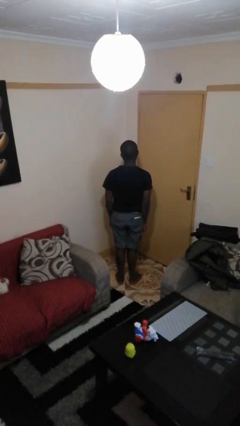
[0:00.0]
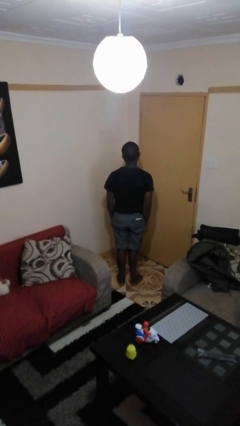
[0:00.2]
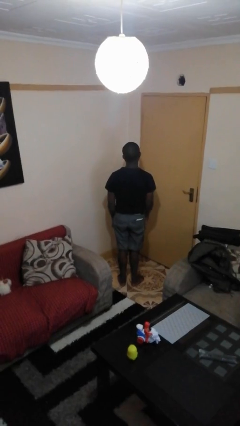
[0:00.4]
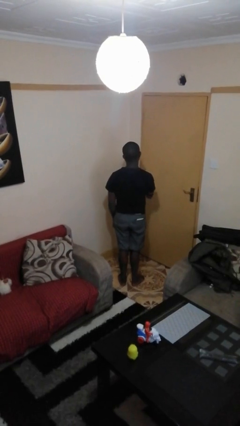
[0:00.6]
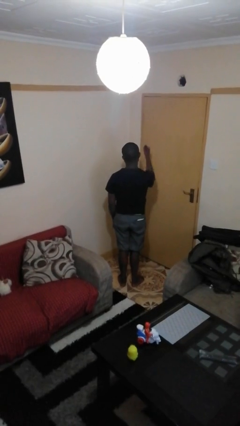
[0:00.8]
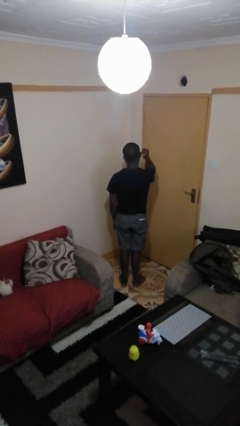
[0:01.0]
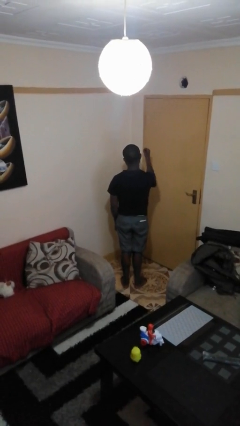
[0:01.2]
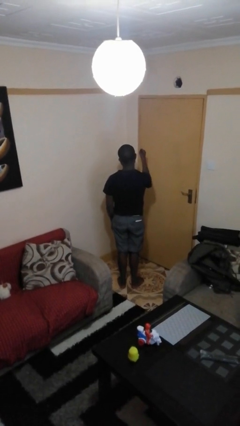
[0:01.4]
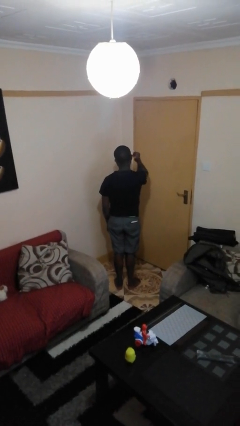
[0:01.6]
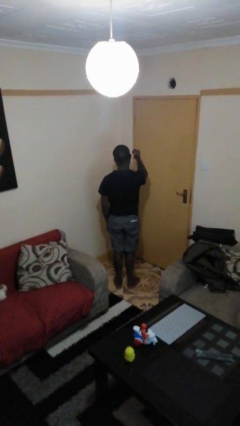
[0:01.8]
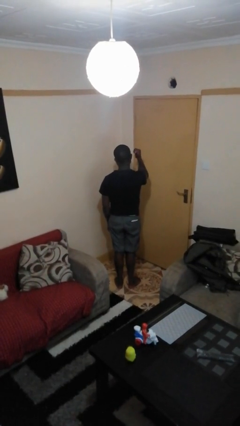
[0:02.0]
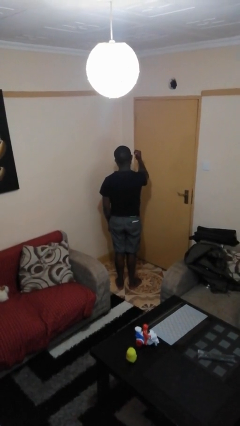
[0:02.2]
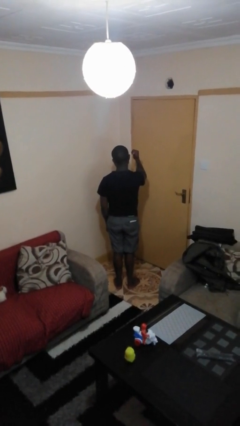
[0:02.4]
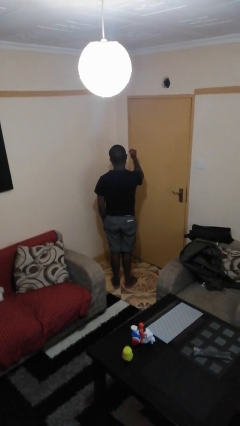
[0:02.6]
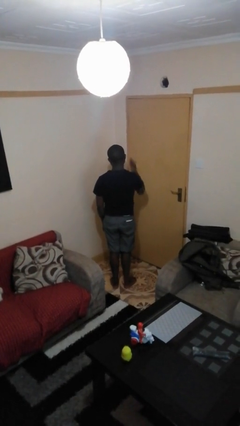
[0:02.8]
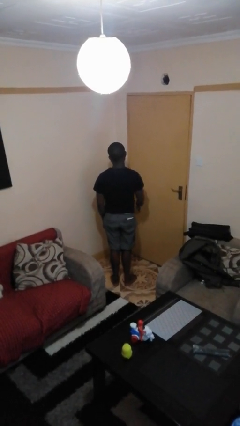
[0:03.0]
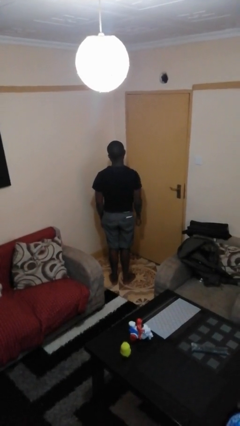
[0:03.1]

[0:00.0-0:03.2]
person gestures behind me

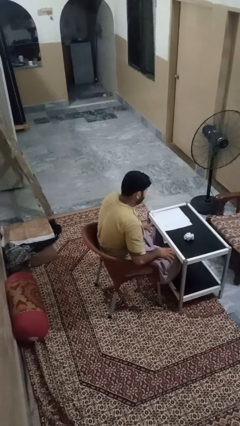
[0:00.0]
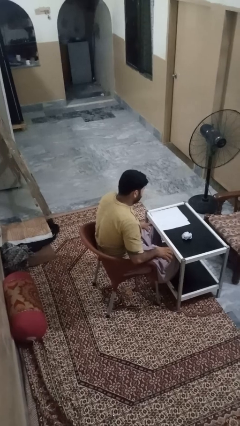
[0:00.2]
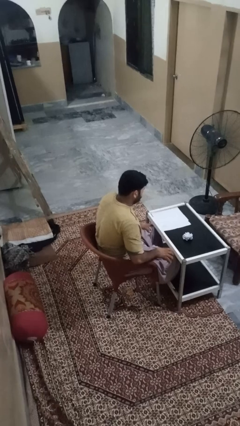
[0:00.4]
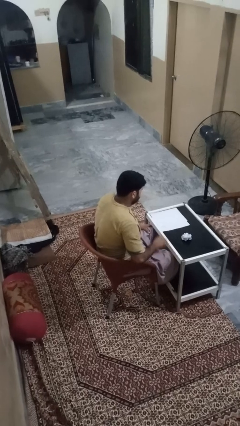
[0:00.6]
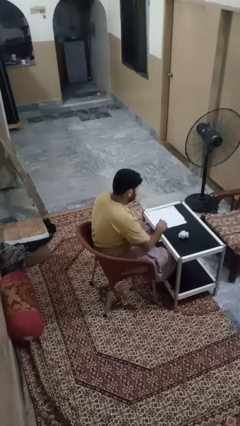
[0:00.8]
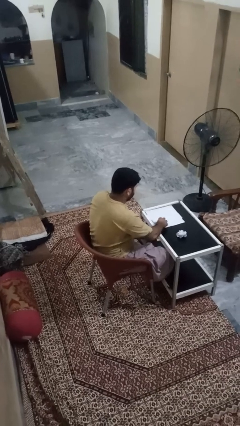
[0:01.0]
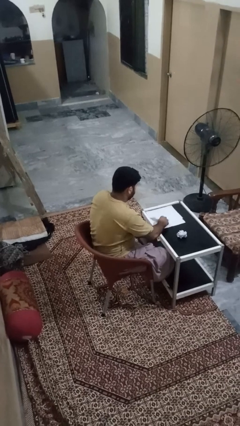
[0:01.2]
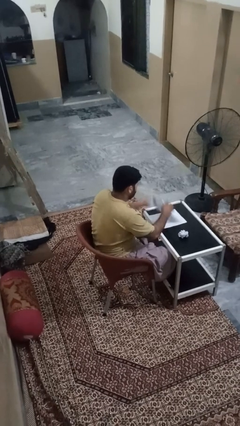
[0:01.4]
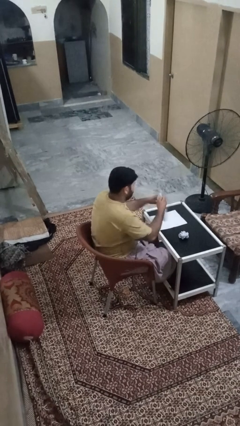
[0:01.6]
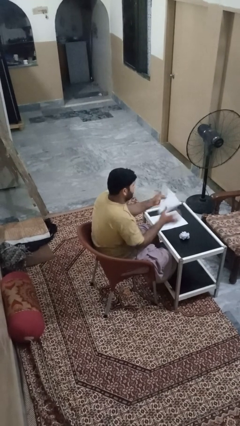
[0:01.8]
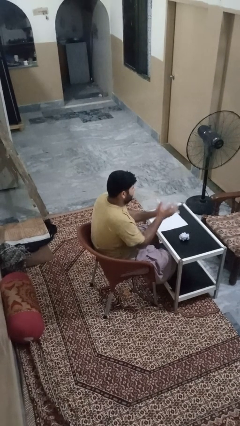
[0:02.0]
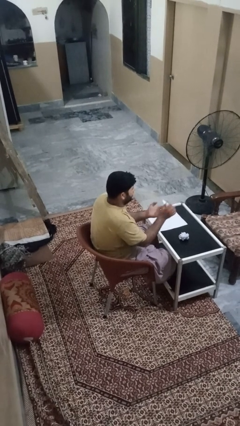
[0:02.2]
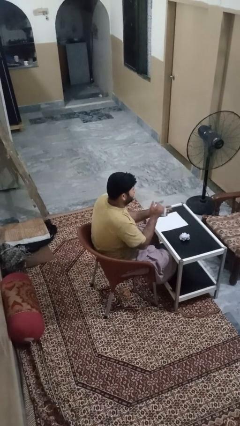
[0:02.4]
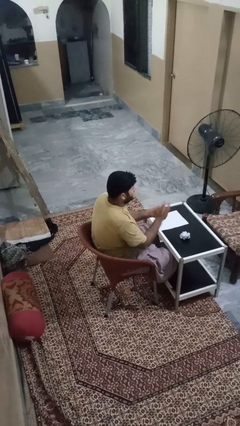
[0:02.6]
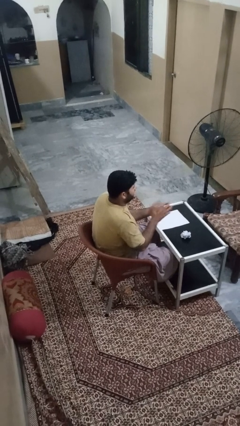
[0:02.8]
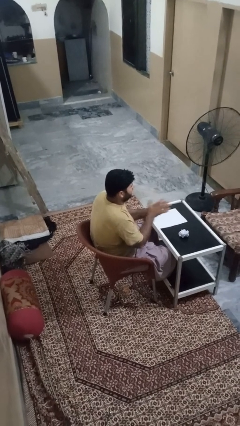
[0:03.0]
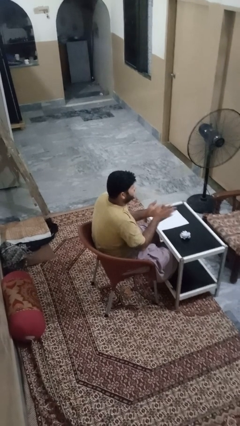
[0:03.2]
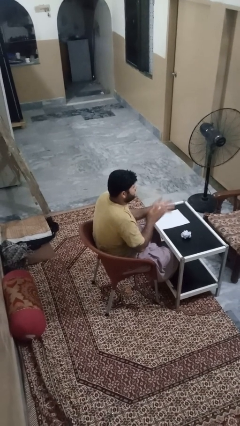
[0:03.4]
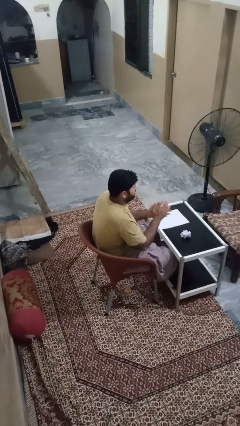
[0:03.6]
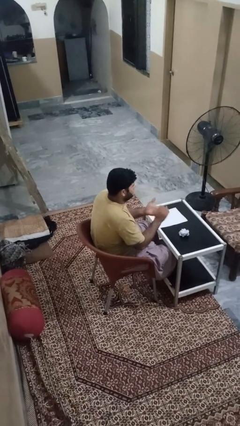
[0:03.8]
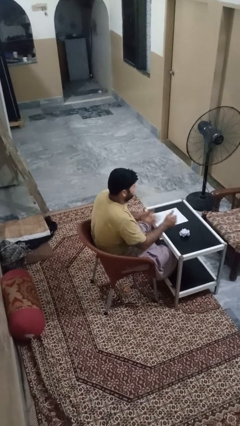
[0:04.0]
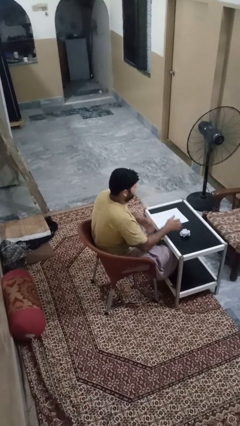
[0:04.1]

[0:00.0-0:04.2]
person crumples paper

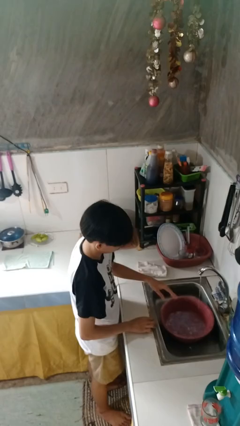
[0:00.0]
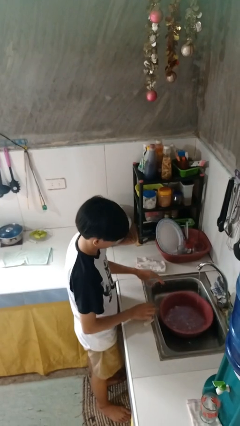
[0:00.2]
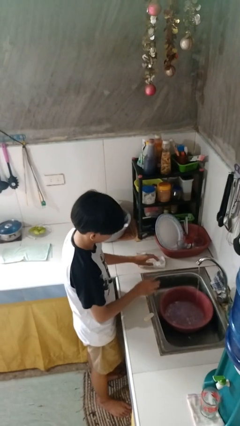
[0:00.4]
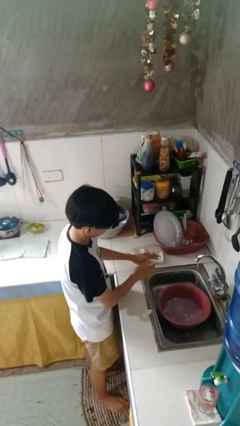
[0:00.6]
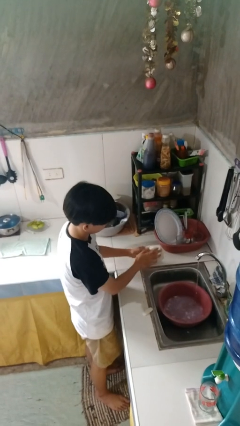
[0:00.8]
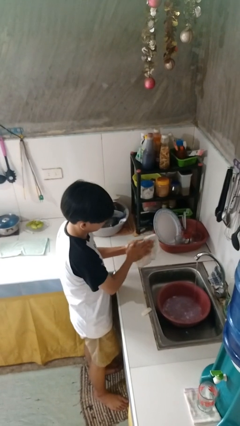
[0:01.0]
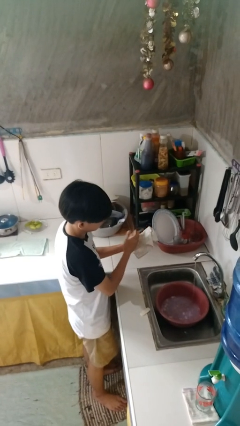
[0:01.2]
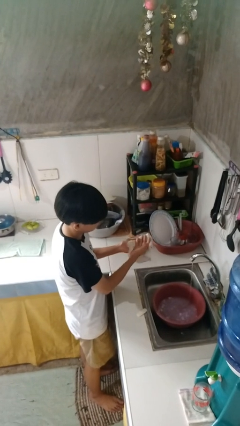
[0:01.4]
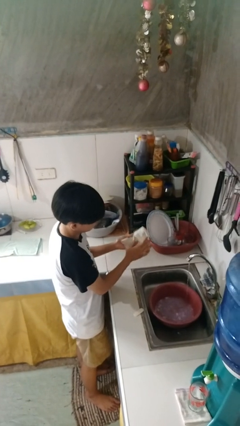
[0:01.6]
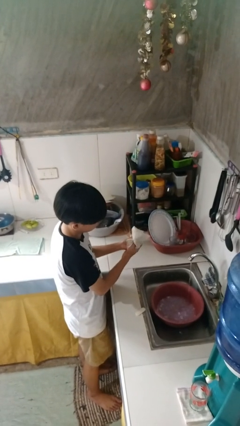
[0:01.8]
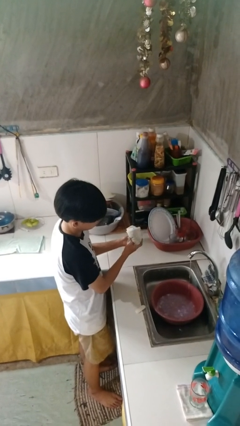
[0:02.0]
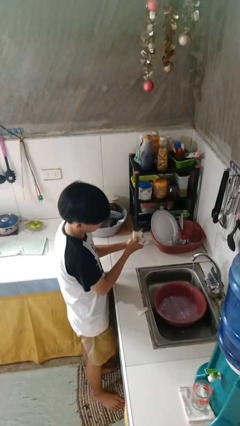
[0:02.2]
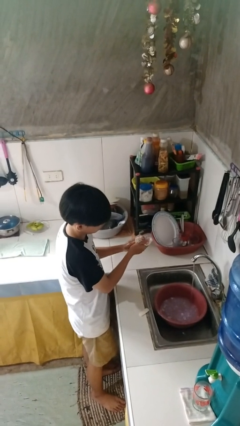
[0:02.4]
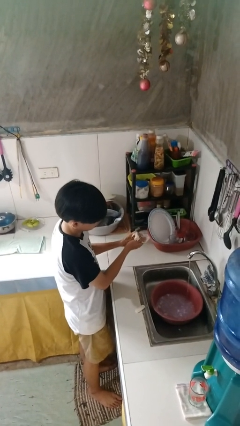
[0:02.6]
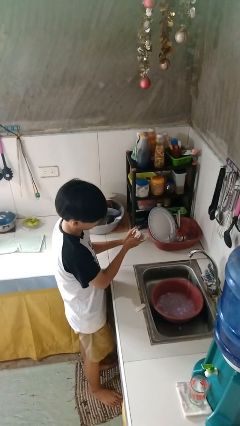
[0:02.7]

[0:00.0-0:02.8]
person dries hands with towel

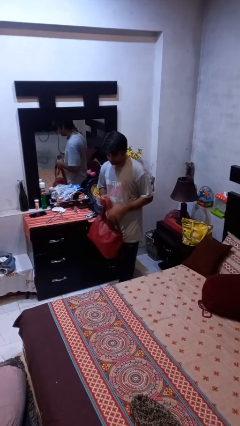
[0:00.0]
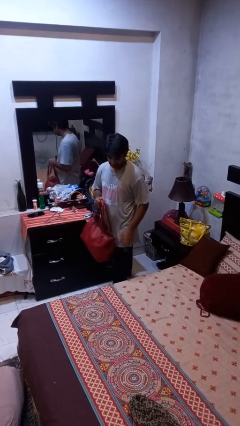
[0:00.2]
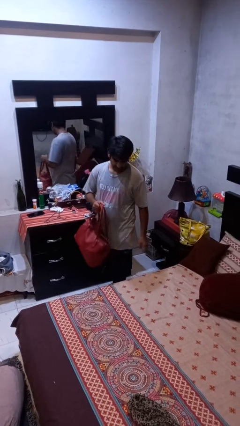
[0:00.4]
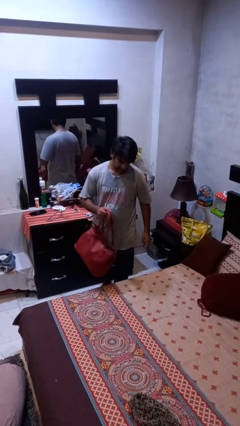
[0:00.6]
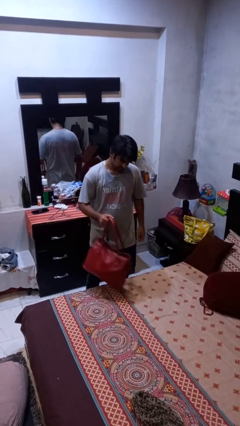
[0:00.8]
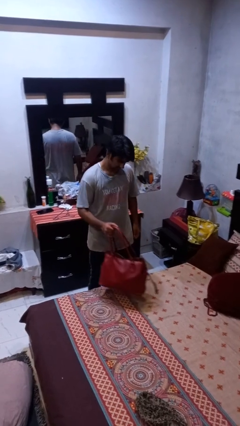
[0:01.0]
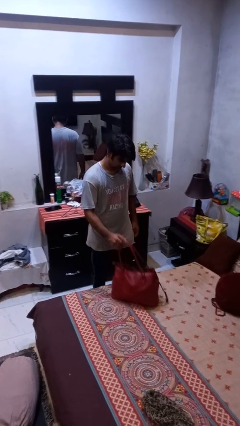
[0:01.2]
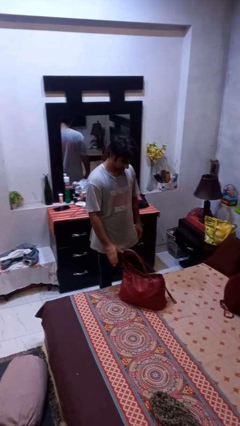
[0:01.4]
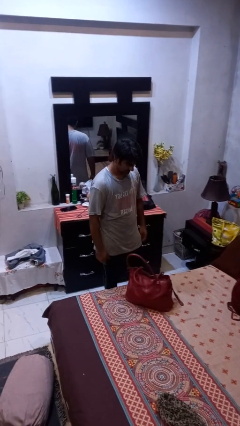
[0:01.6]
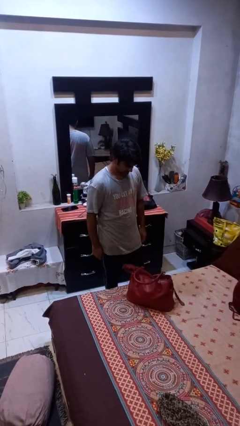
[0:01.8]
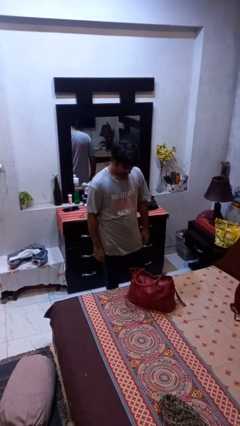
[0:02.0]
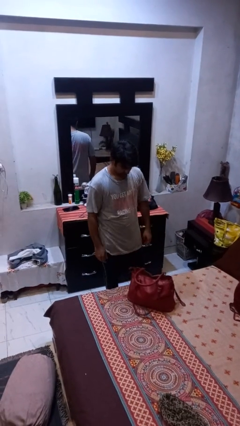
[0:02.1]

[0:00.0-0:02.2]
person puts down object on bed

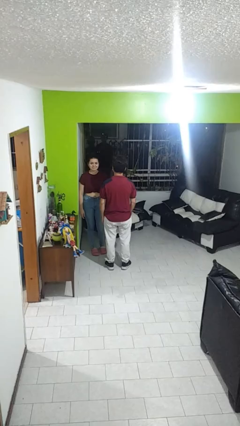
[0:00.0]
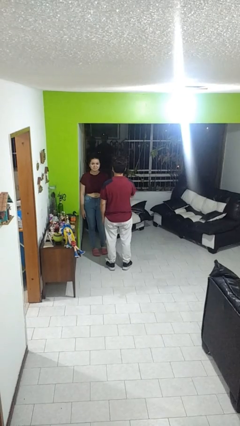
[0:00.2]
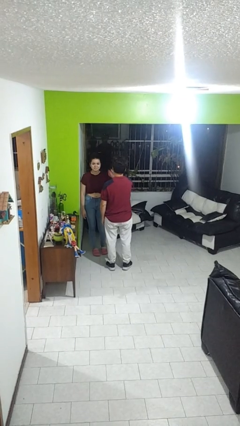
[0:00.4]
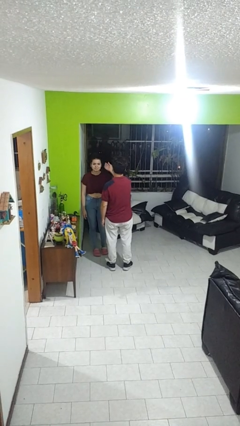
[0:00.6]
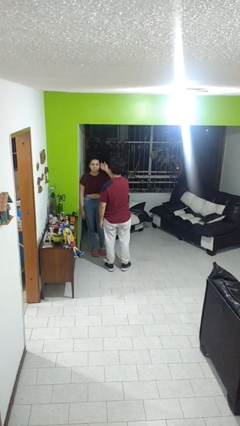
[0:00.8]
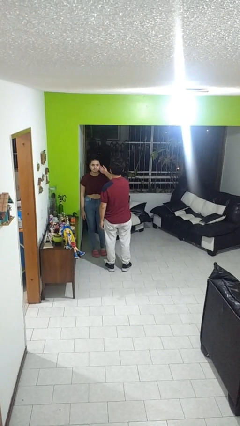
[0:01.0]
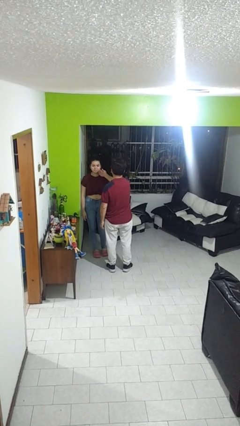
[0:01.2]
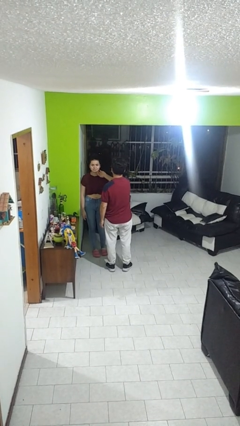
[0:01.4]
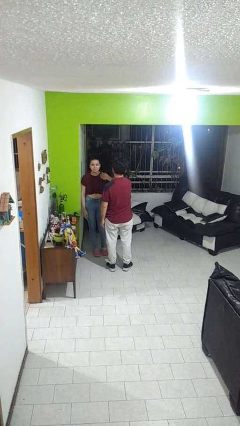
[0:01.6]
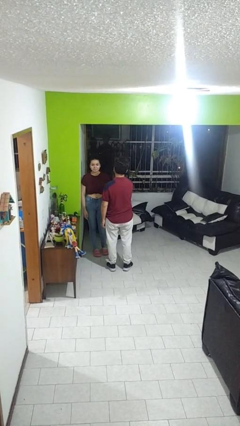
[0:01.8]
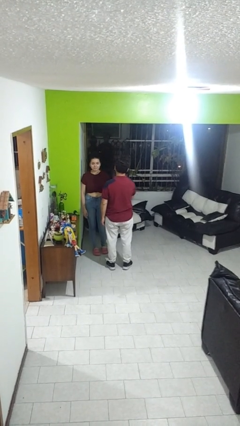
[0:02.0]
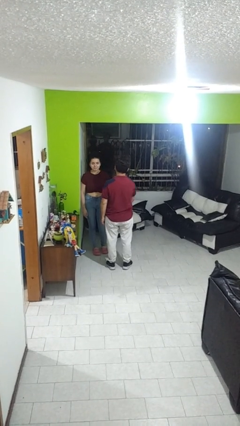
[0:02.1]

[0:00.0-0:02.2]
person touches face of person

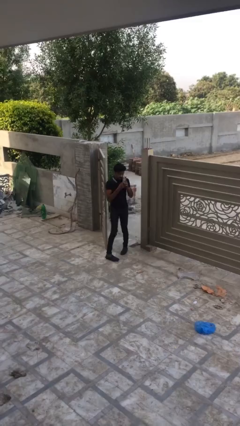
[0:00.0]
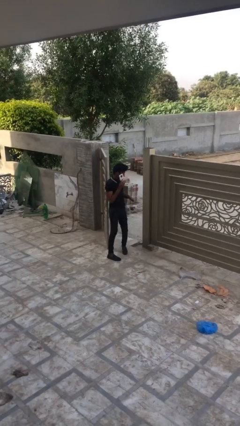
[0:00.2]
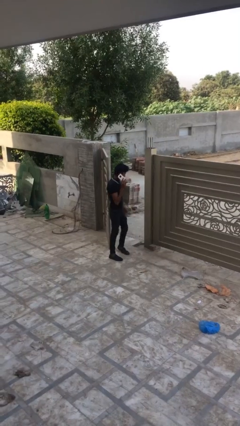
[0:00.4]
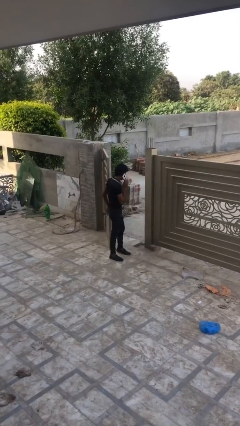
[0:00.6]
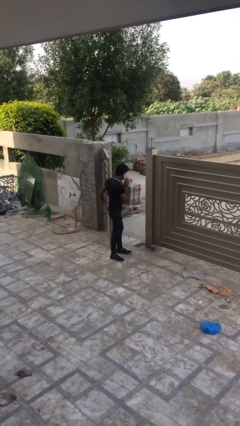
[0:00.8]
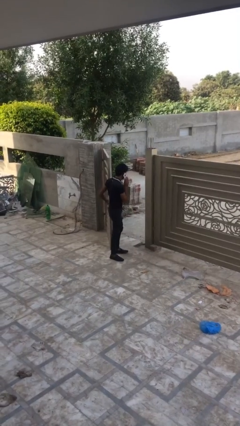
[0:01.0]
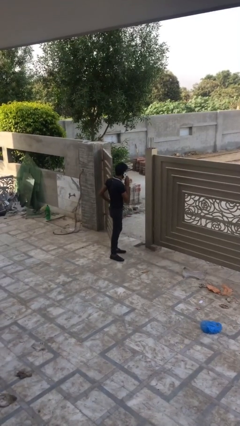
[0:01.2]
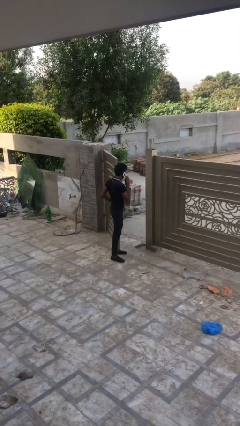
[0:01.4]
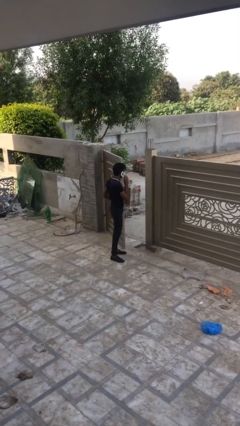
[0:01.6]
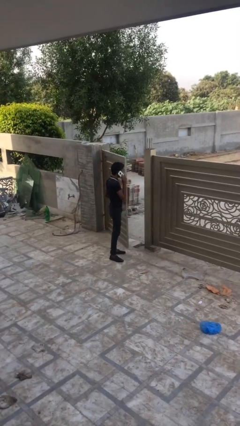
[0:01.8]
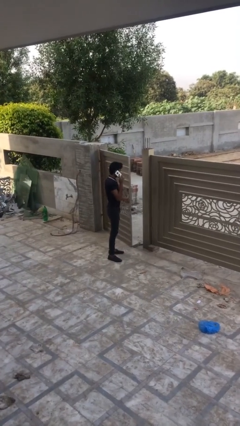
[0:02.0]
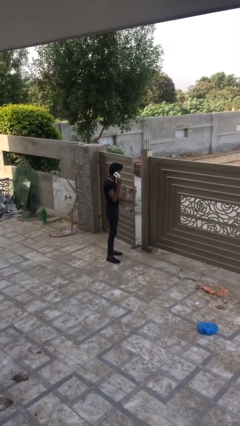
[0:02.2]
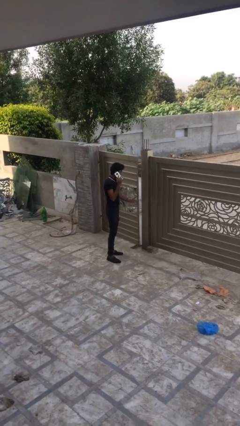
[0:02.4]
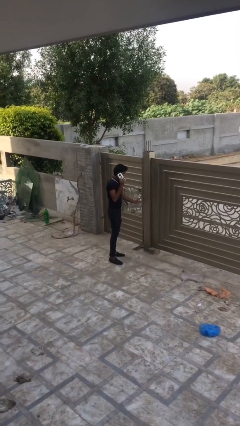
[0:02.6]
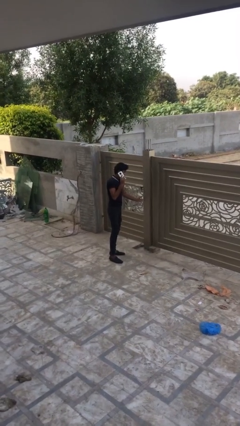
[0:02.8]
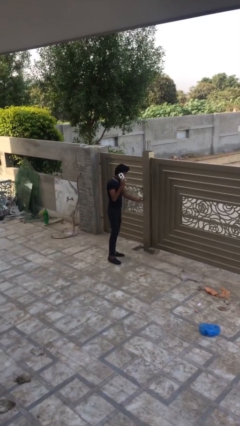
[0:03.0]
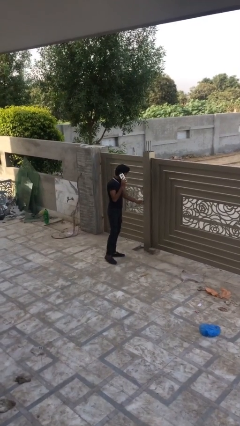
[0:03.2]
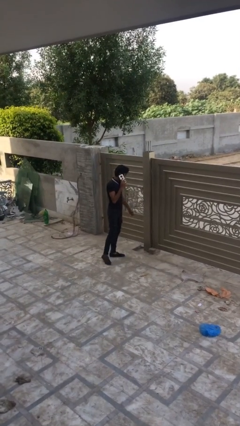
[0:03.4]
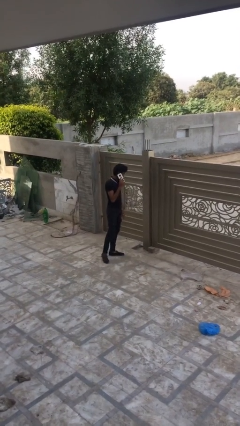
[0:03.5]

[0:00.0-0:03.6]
person closes facility door
